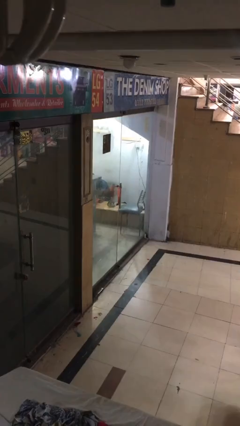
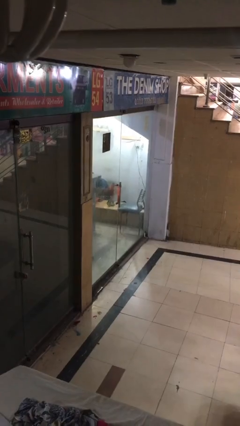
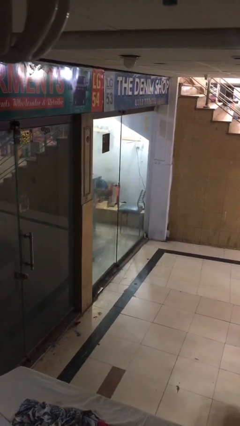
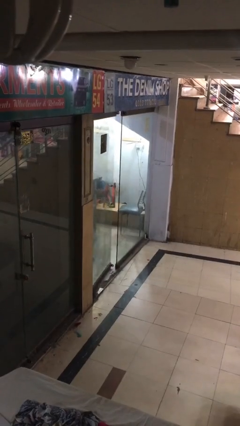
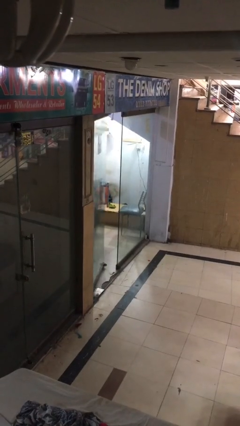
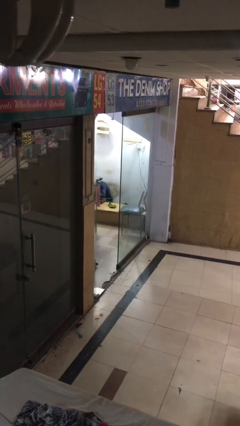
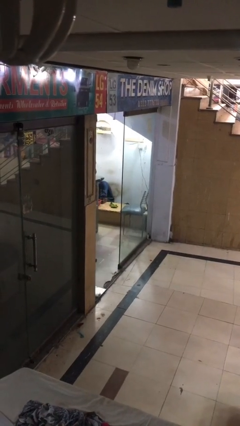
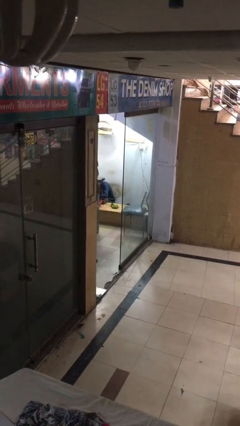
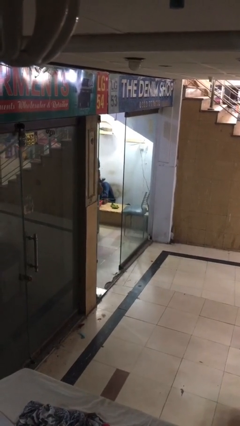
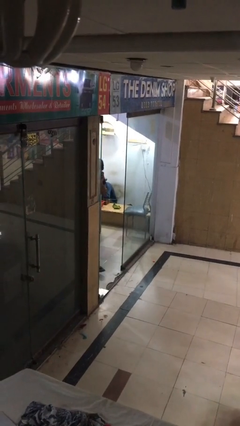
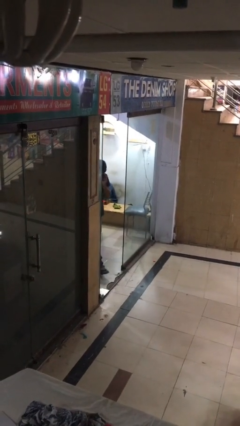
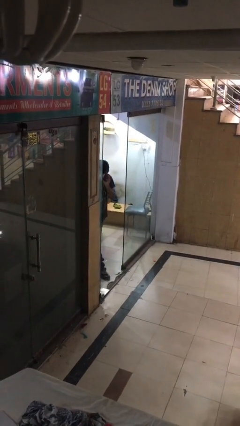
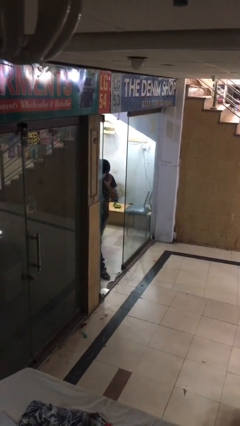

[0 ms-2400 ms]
person opens facility door

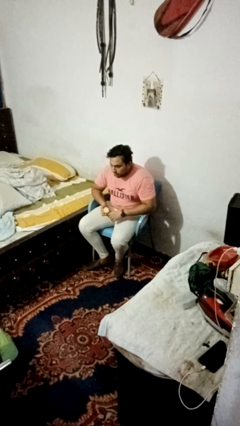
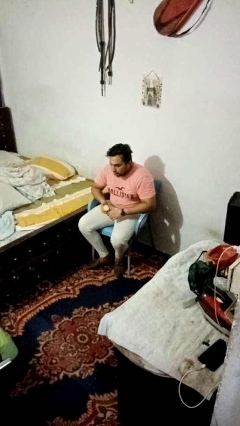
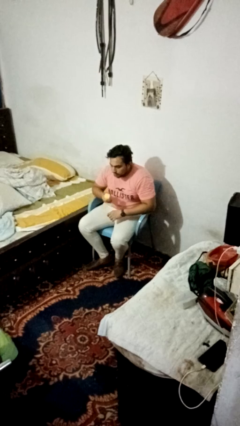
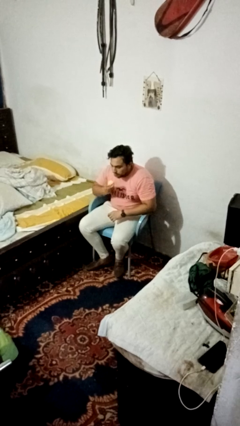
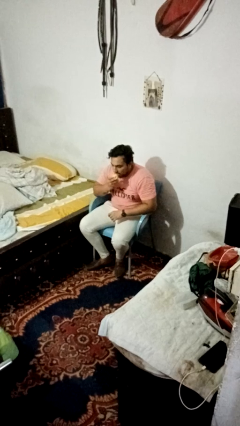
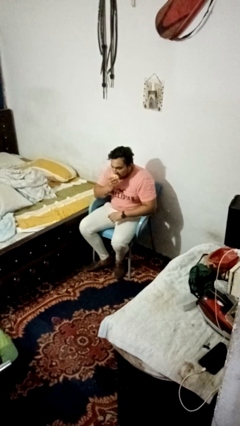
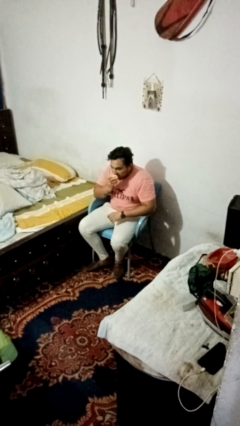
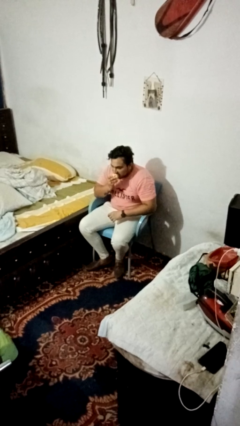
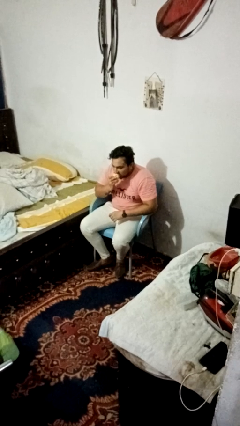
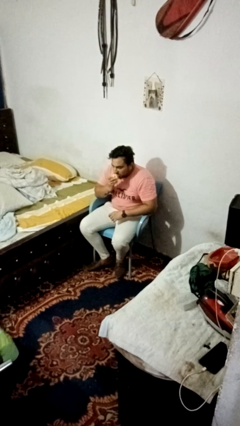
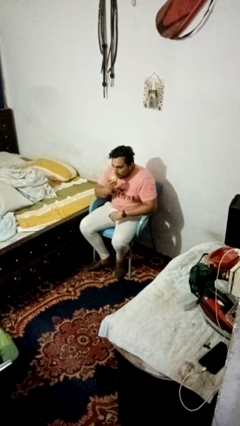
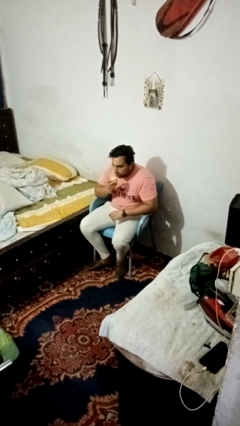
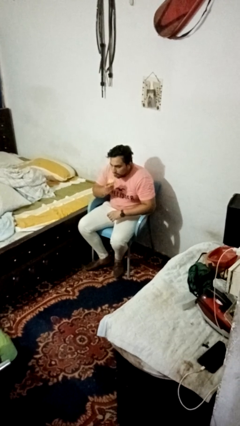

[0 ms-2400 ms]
person eats apple

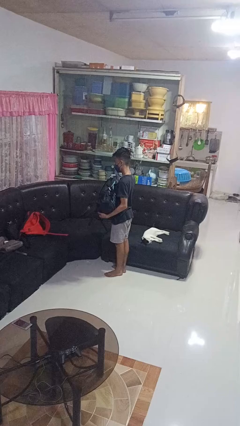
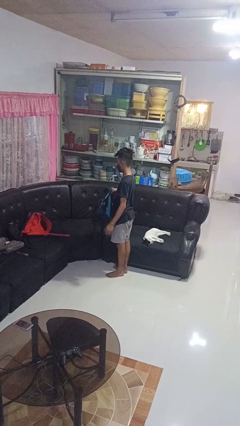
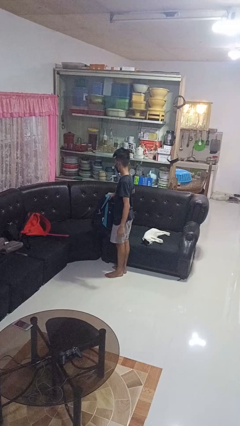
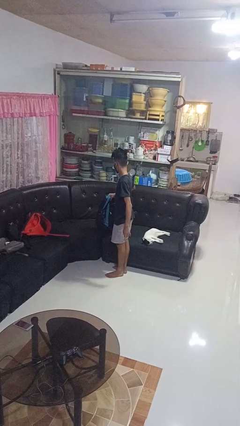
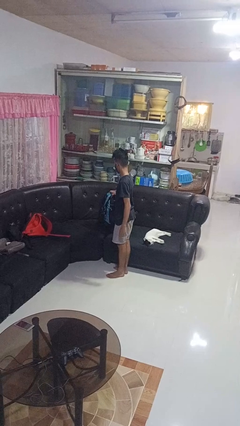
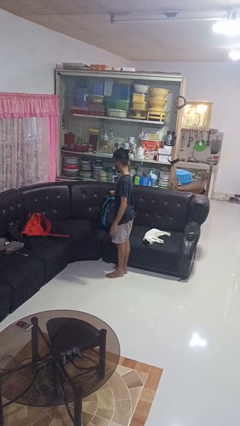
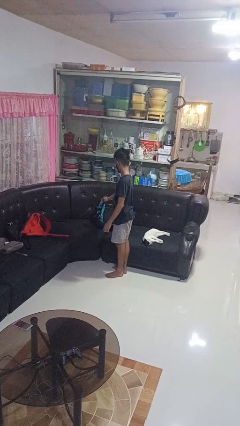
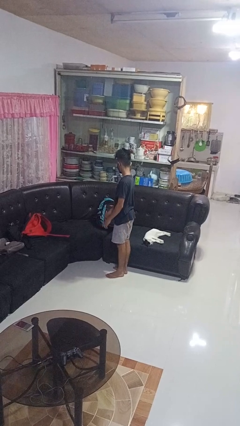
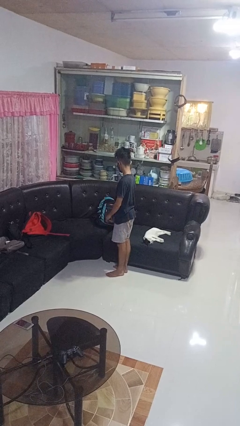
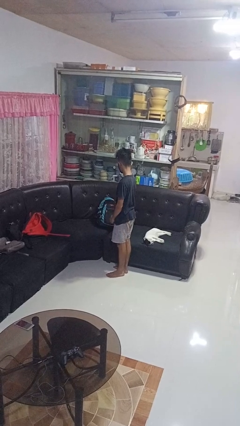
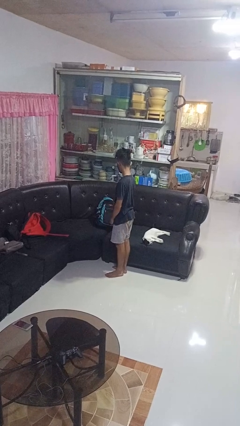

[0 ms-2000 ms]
person puts down object on couch

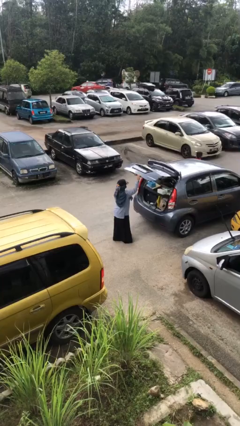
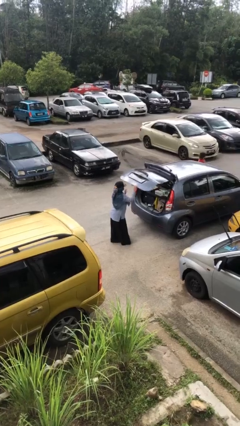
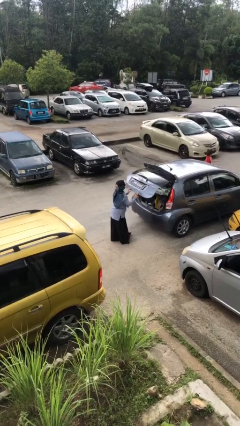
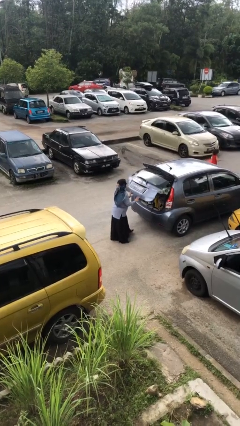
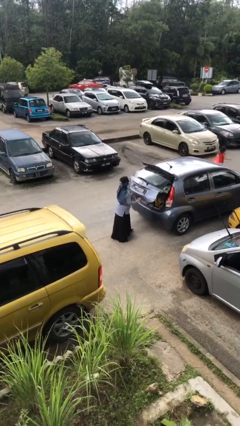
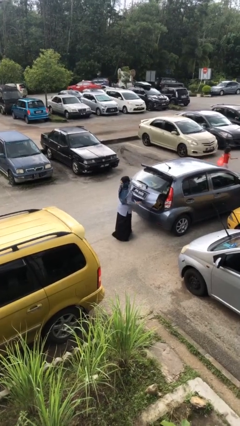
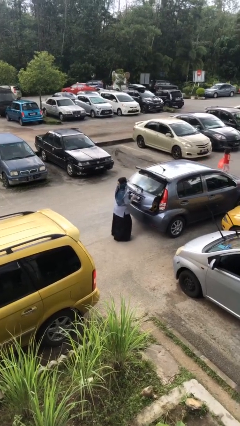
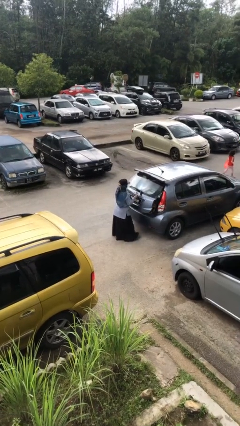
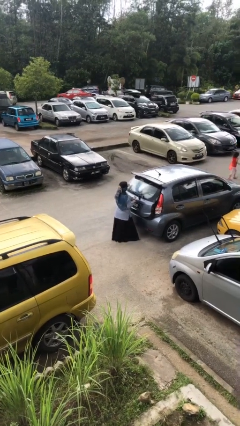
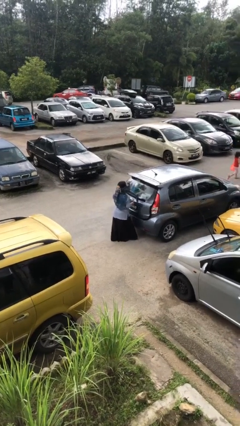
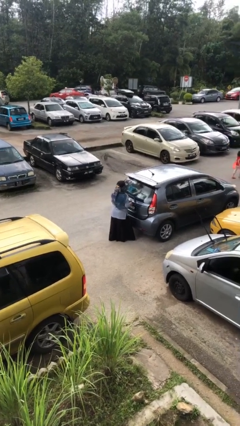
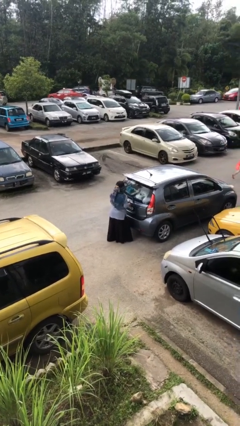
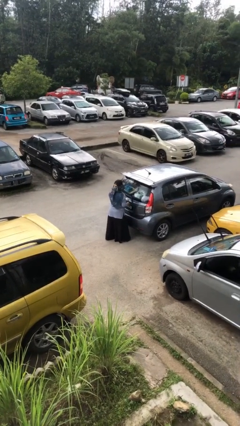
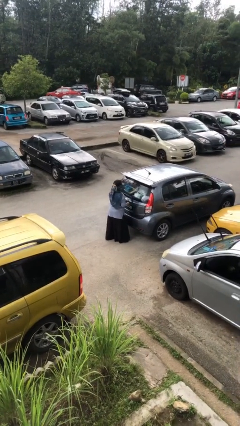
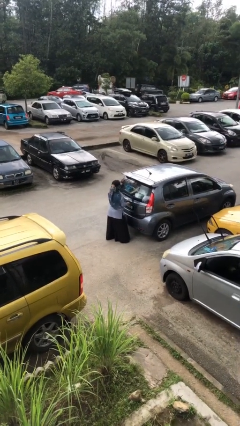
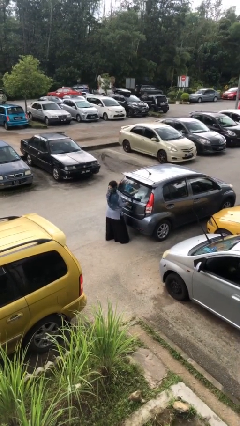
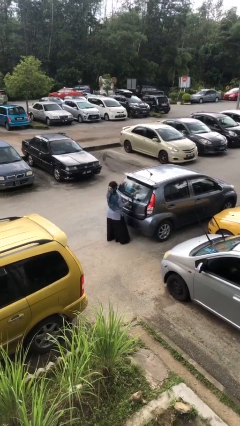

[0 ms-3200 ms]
person closes car trunk

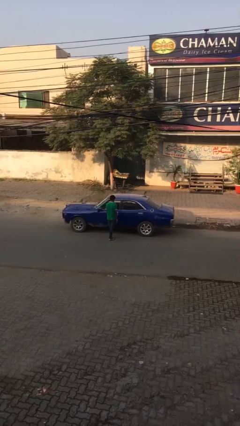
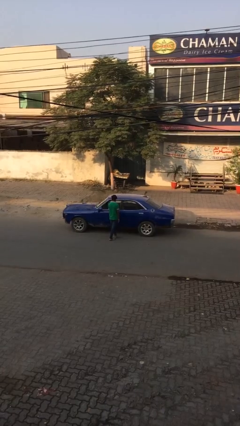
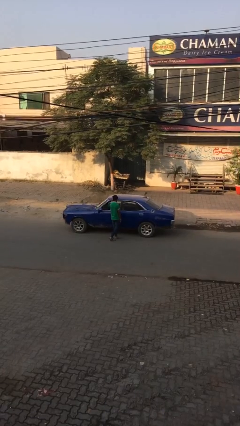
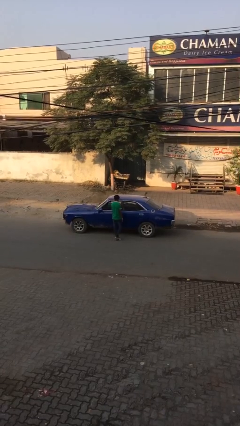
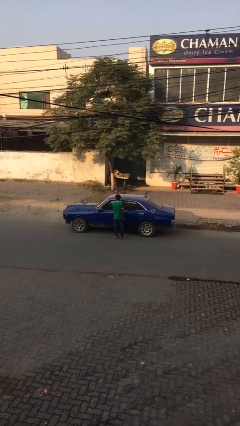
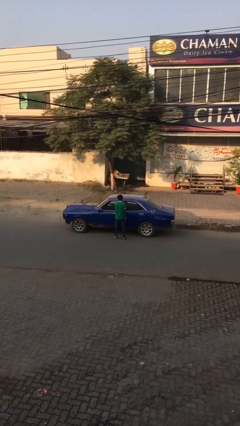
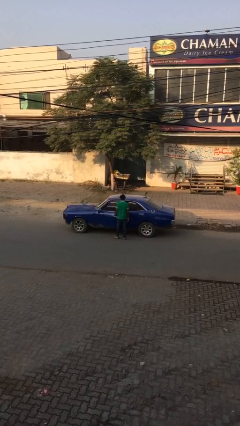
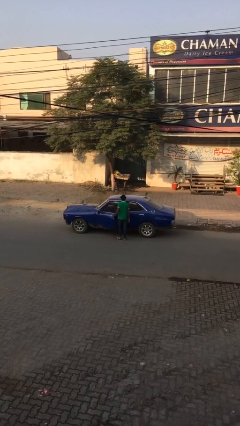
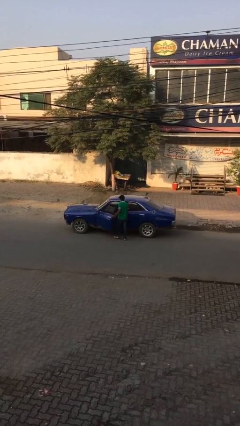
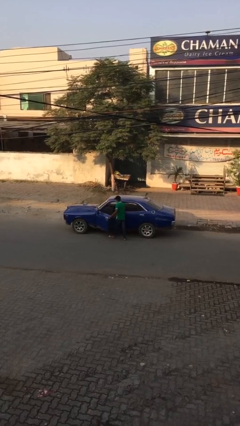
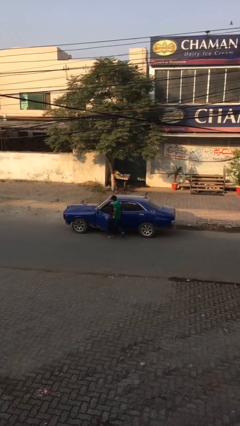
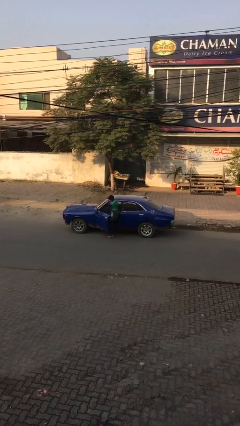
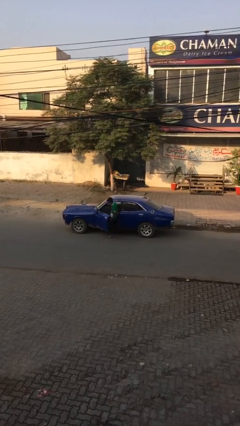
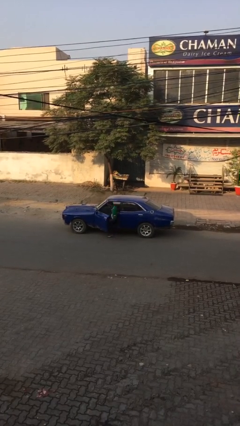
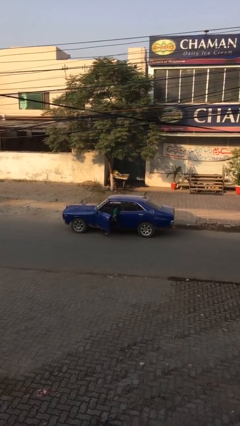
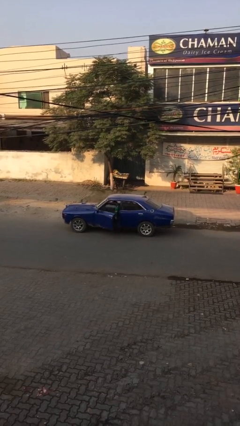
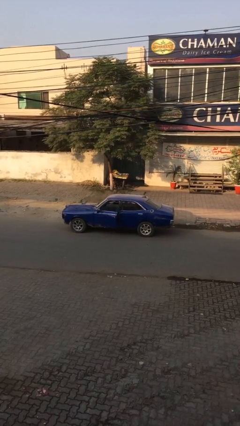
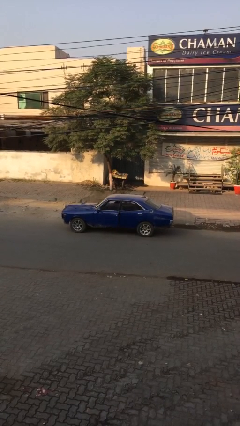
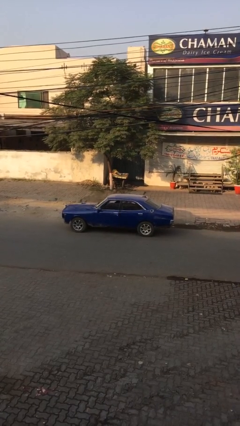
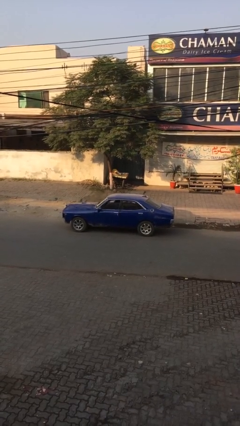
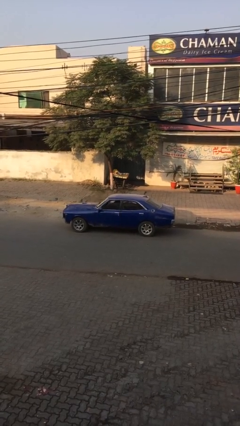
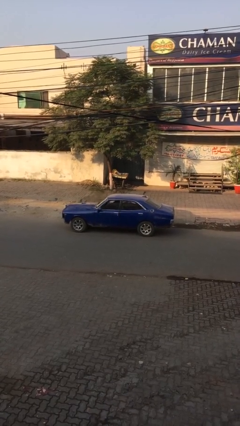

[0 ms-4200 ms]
car picks up person

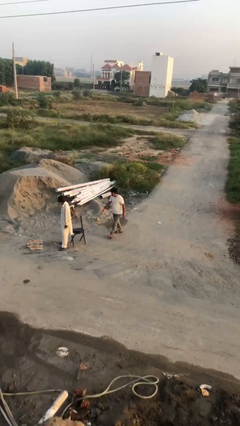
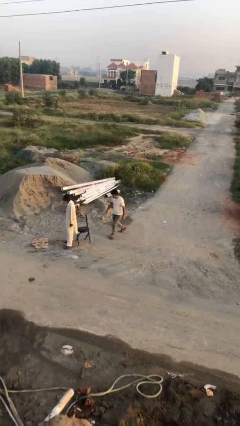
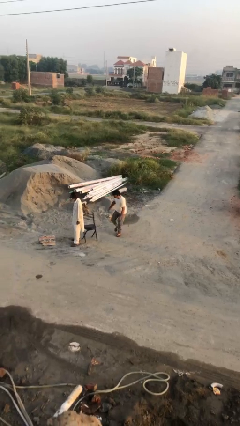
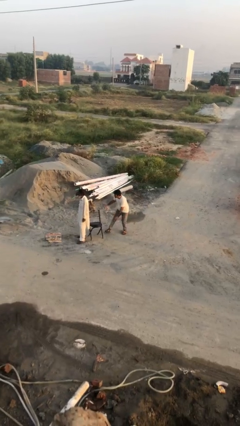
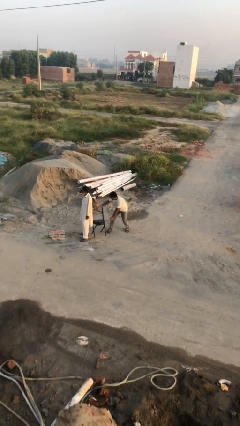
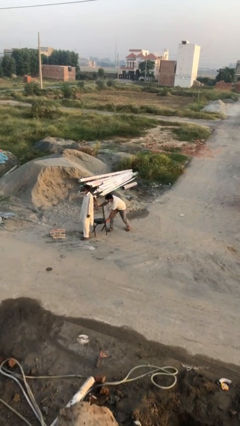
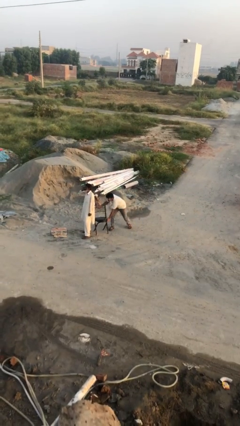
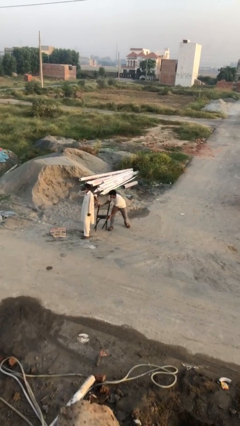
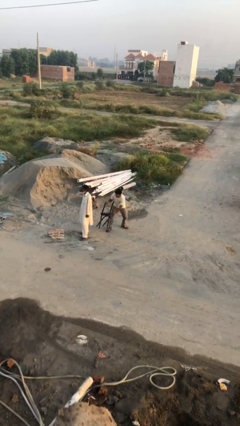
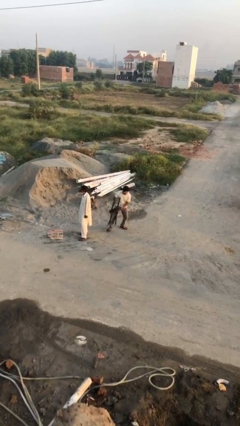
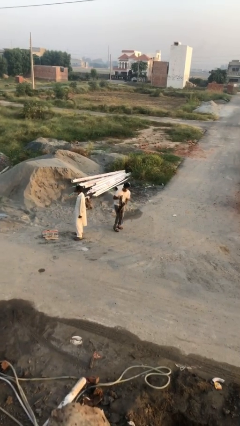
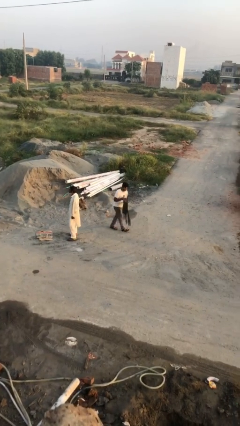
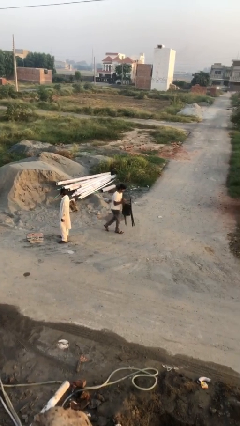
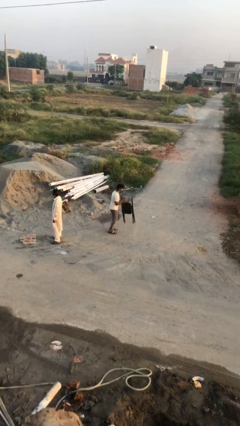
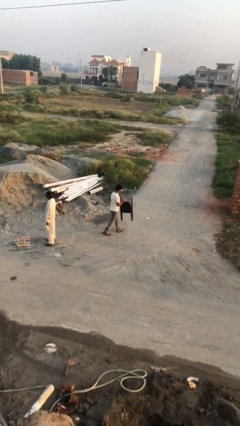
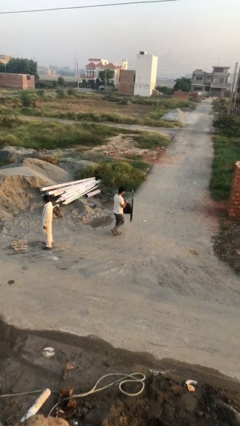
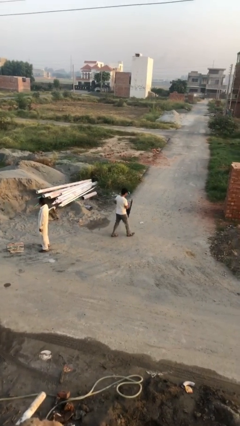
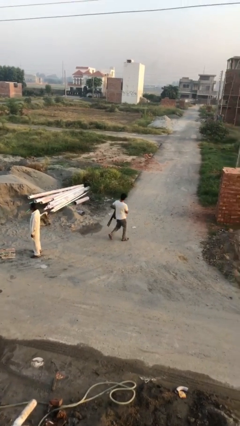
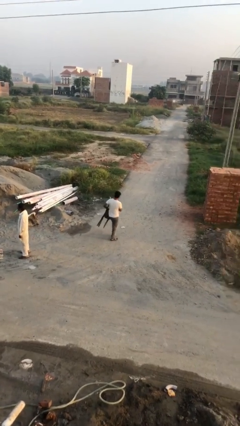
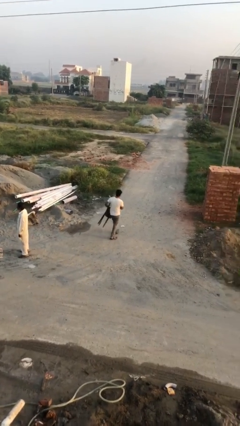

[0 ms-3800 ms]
person steals object from person
